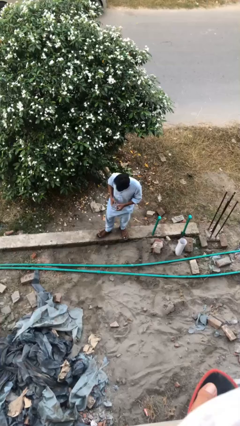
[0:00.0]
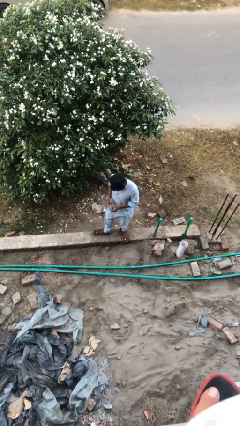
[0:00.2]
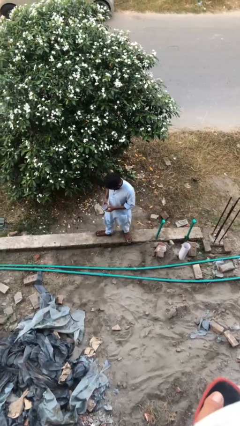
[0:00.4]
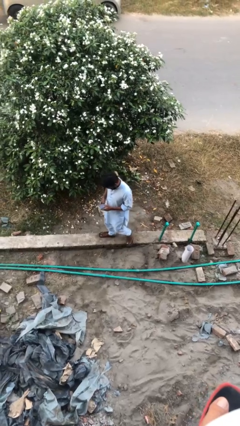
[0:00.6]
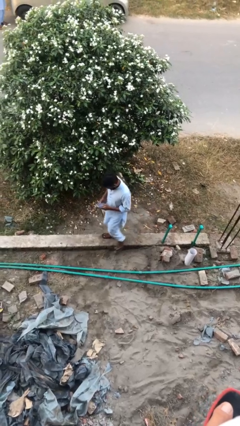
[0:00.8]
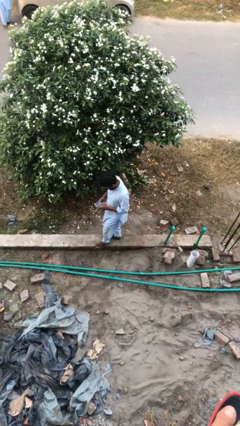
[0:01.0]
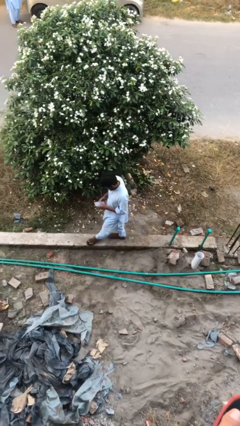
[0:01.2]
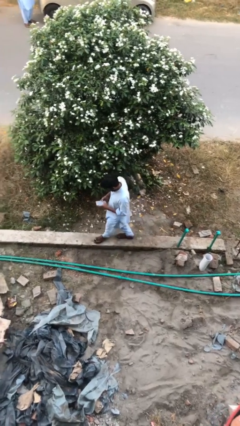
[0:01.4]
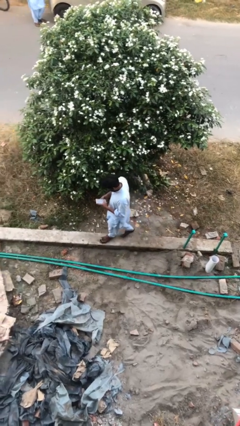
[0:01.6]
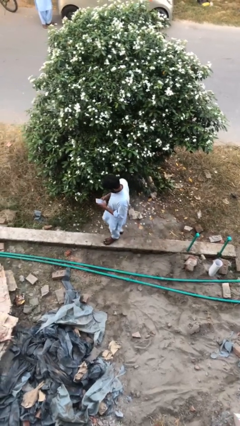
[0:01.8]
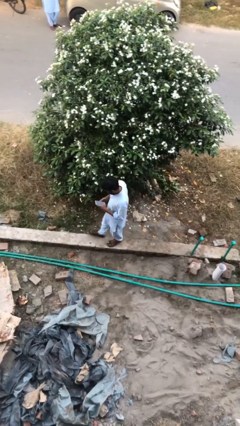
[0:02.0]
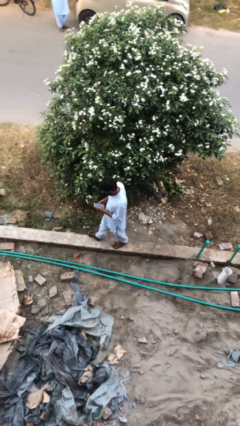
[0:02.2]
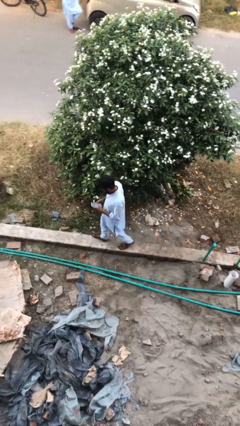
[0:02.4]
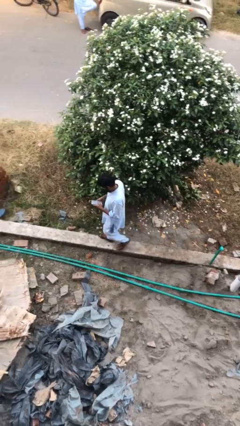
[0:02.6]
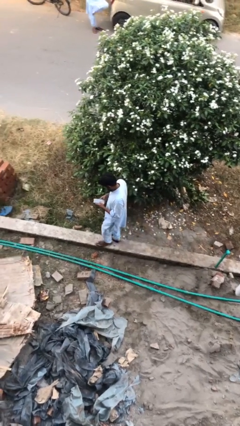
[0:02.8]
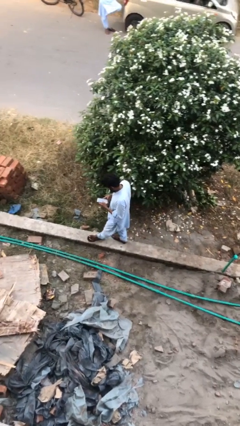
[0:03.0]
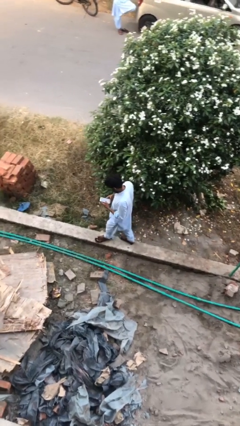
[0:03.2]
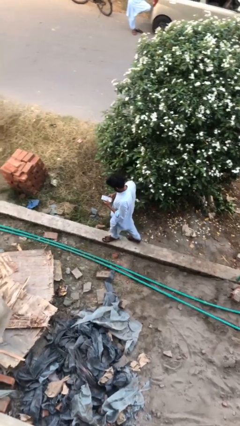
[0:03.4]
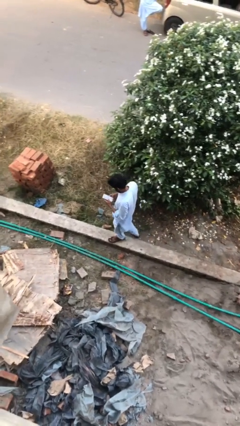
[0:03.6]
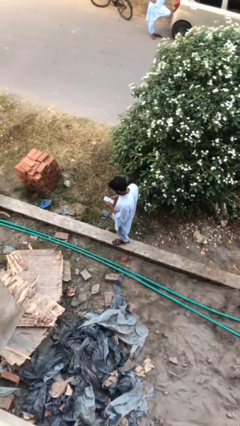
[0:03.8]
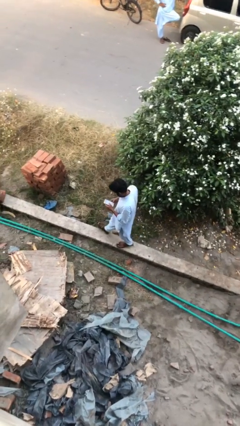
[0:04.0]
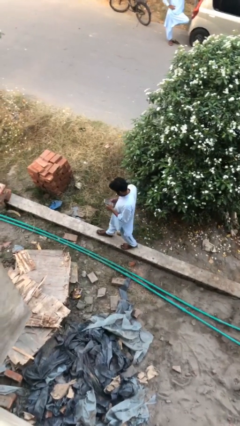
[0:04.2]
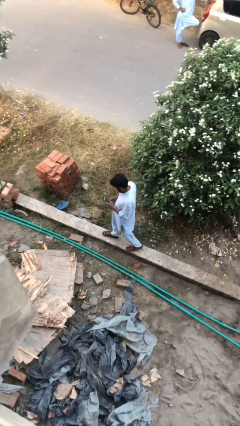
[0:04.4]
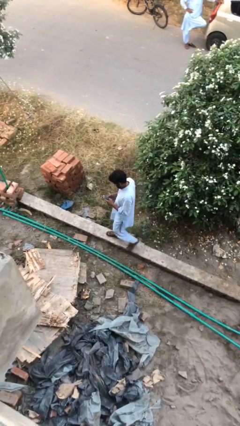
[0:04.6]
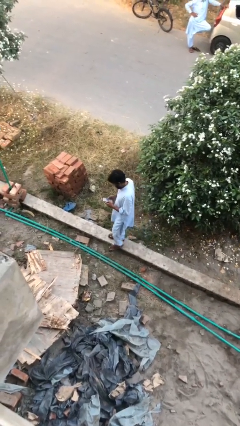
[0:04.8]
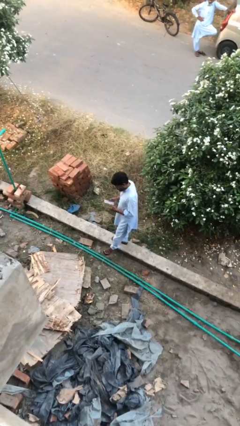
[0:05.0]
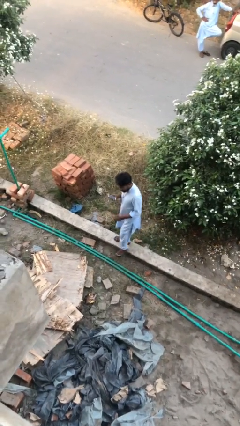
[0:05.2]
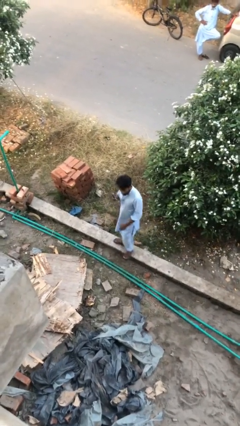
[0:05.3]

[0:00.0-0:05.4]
person texts on phone

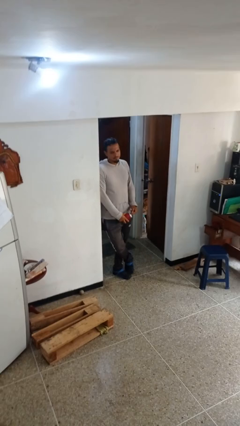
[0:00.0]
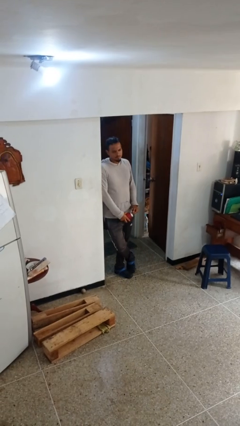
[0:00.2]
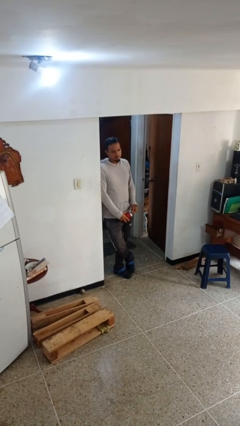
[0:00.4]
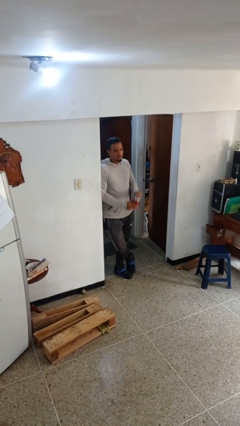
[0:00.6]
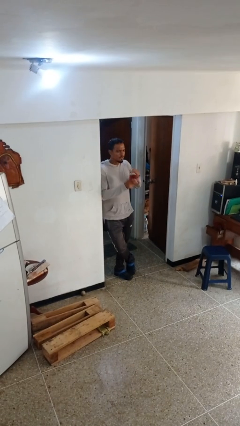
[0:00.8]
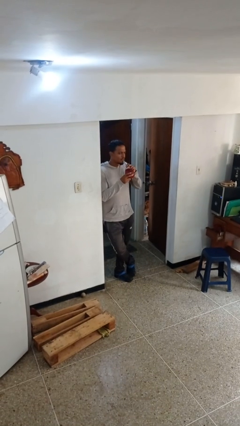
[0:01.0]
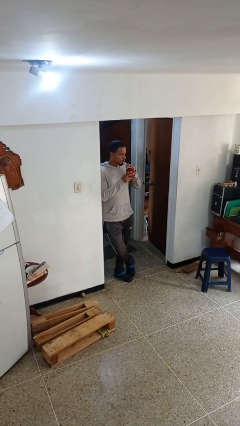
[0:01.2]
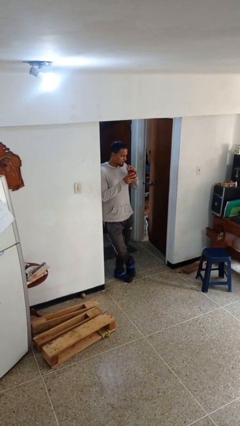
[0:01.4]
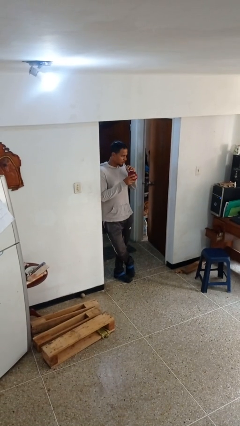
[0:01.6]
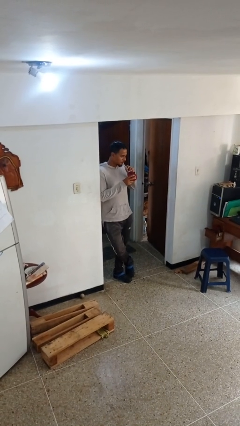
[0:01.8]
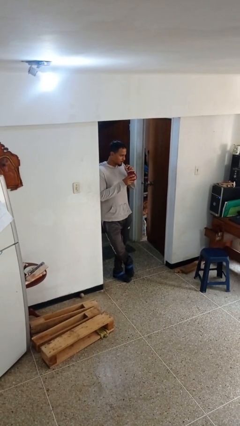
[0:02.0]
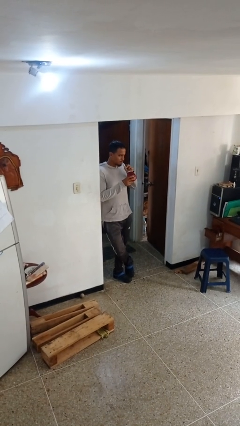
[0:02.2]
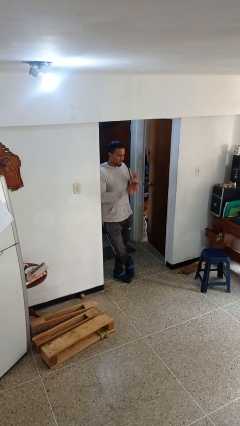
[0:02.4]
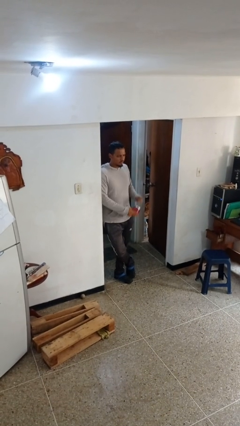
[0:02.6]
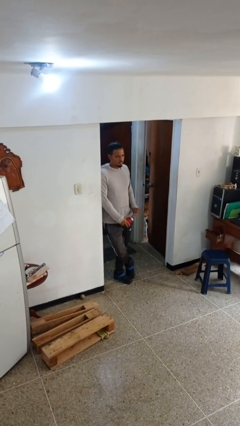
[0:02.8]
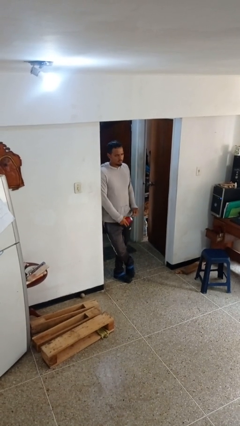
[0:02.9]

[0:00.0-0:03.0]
person drinks from straw

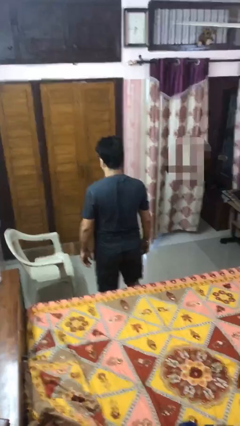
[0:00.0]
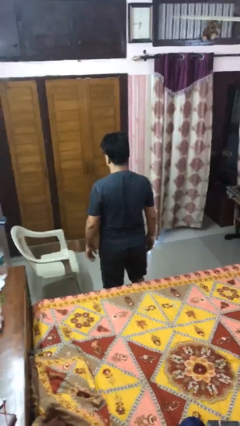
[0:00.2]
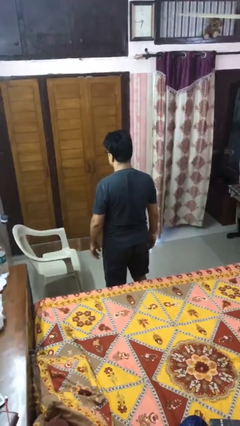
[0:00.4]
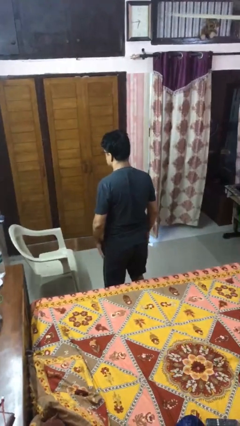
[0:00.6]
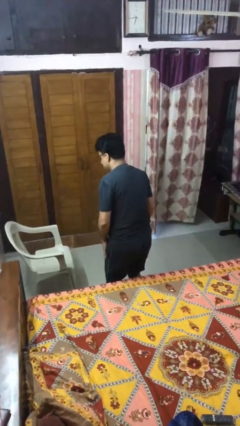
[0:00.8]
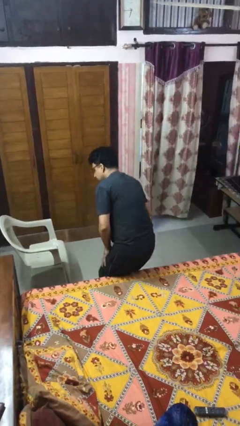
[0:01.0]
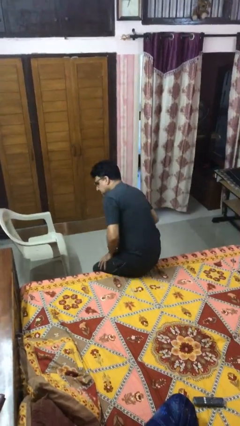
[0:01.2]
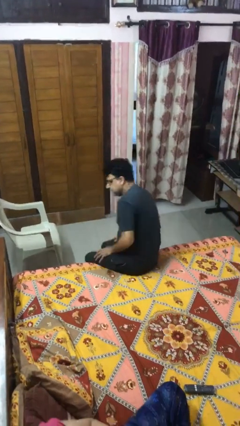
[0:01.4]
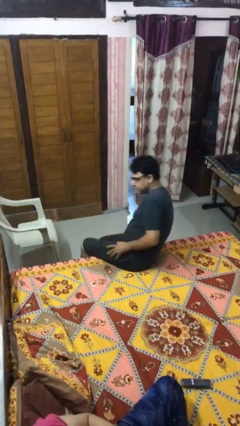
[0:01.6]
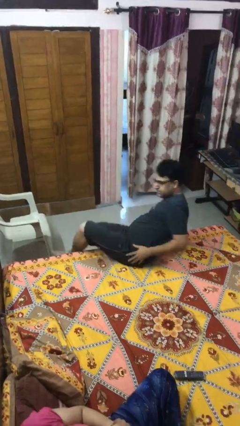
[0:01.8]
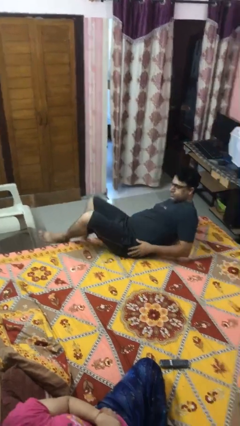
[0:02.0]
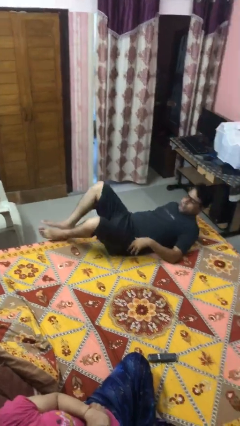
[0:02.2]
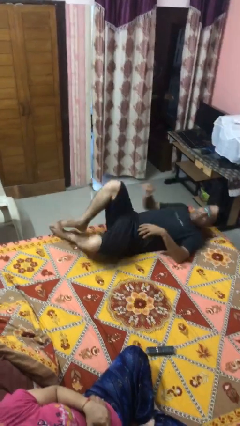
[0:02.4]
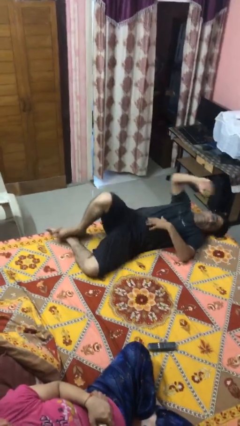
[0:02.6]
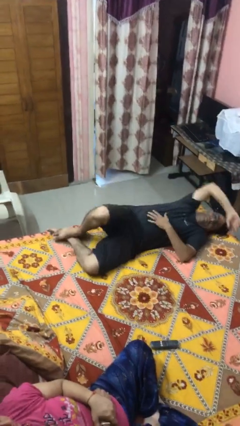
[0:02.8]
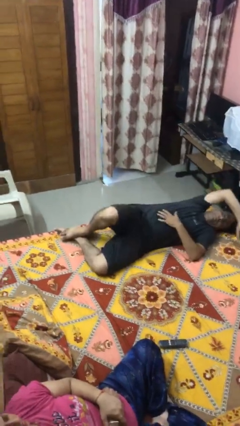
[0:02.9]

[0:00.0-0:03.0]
person lies down on bed

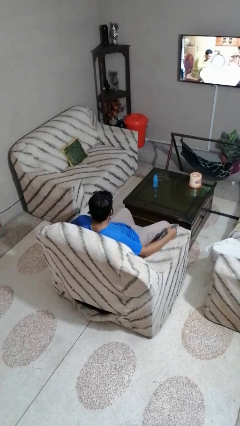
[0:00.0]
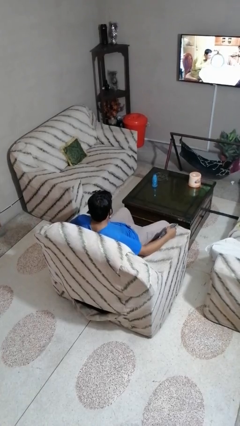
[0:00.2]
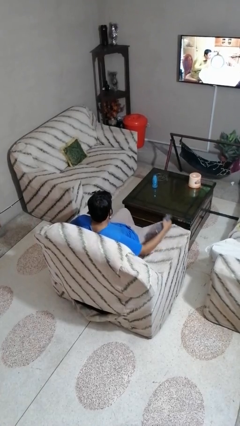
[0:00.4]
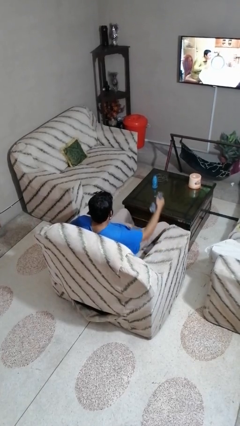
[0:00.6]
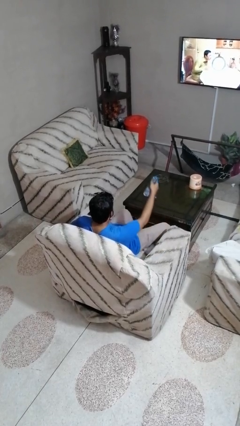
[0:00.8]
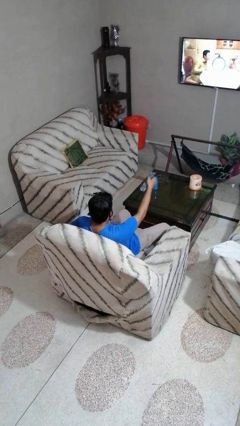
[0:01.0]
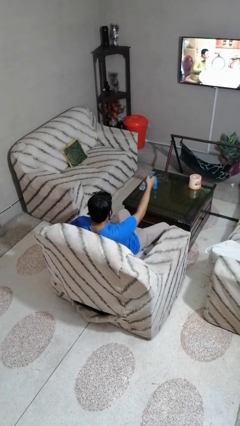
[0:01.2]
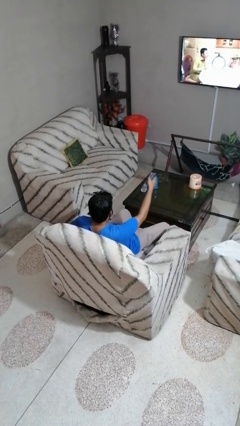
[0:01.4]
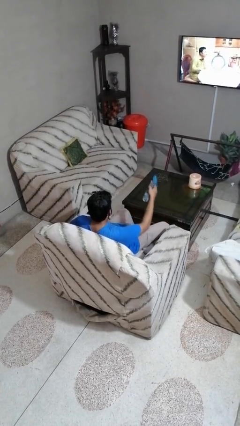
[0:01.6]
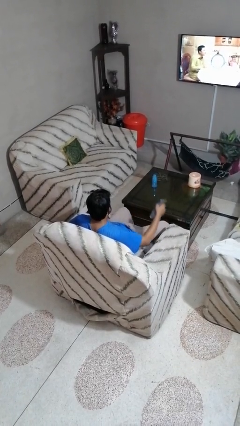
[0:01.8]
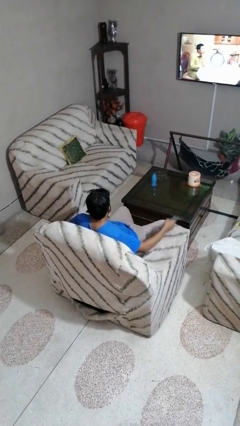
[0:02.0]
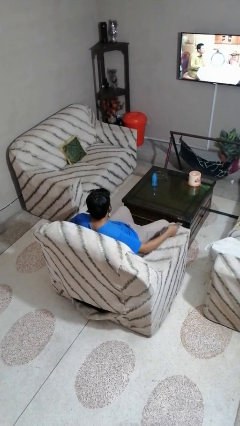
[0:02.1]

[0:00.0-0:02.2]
person uses television remote

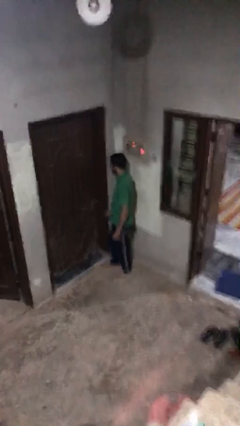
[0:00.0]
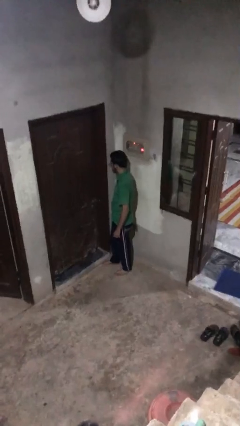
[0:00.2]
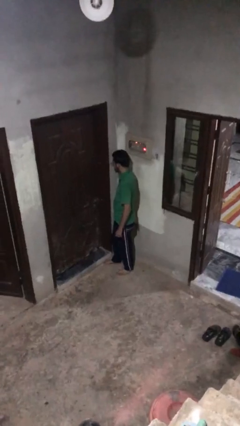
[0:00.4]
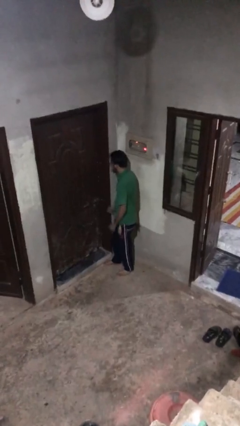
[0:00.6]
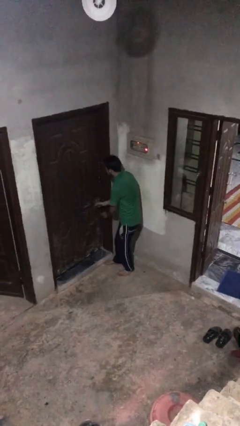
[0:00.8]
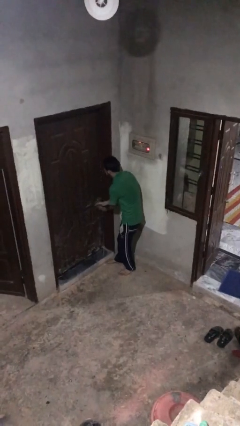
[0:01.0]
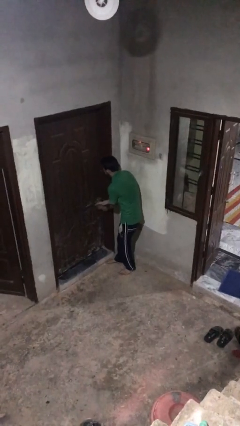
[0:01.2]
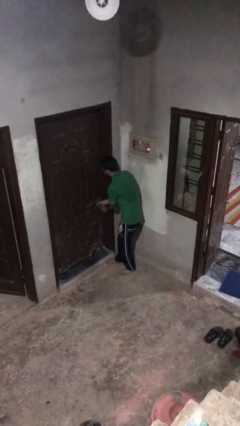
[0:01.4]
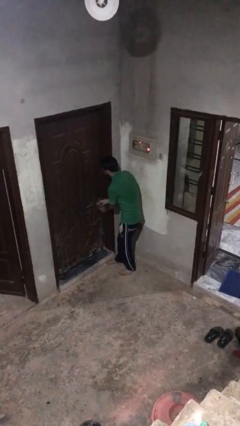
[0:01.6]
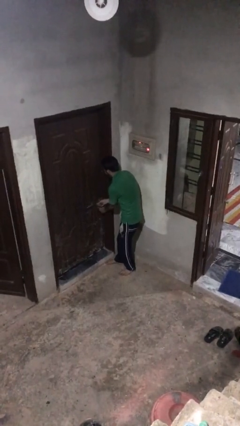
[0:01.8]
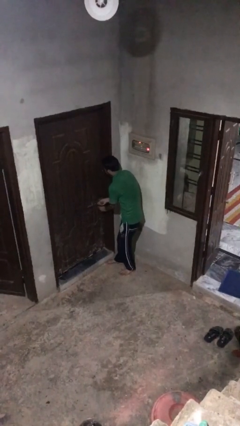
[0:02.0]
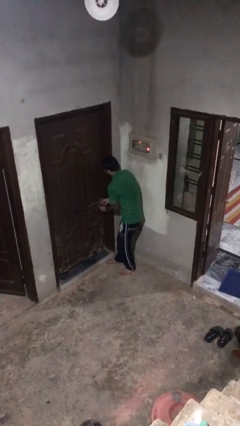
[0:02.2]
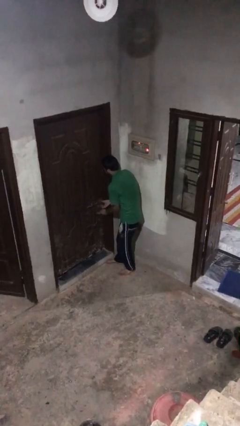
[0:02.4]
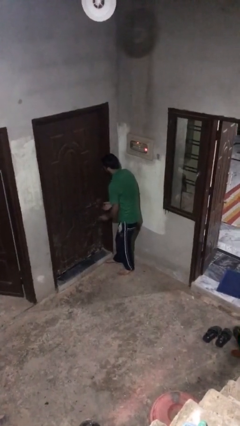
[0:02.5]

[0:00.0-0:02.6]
person locks door with keys

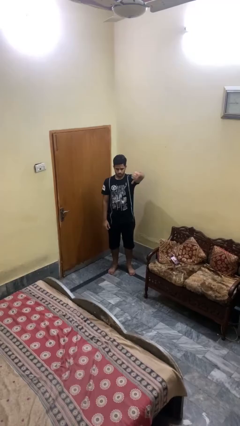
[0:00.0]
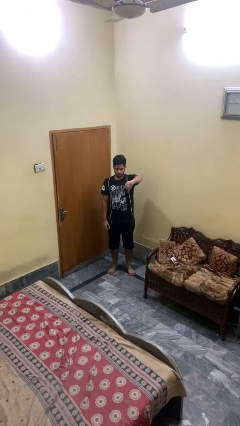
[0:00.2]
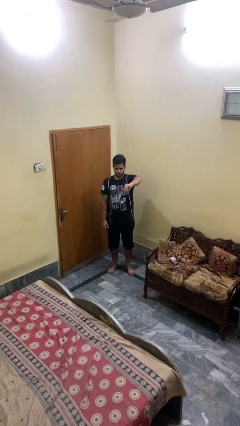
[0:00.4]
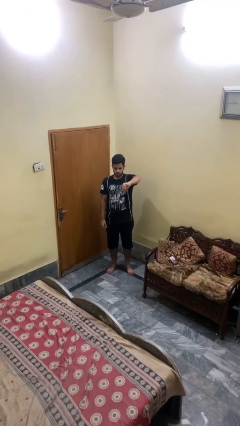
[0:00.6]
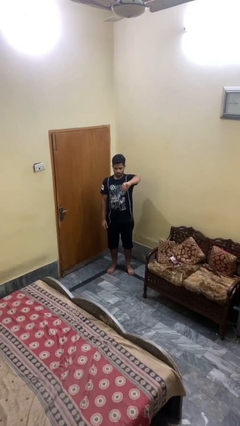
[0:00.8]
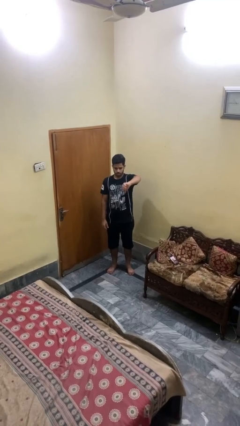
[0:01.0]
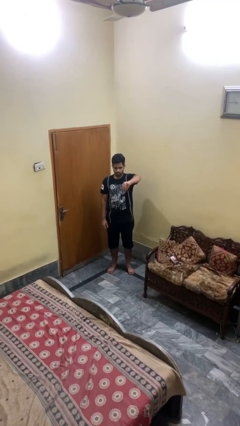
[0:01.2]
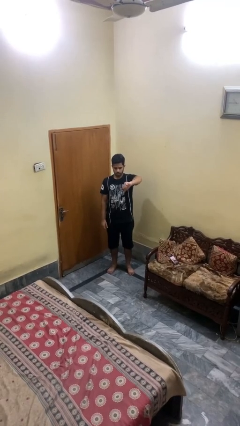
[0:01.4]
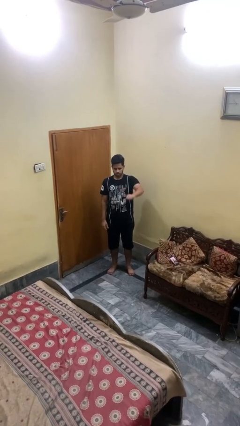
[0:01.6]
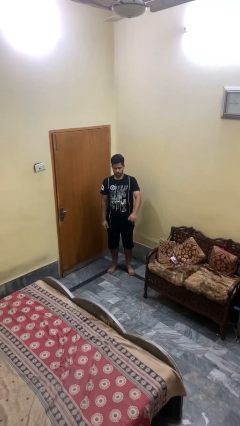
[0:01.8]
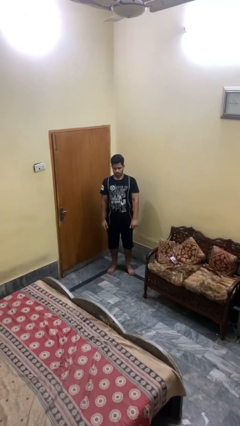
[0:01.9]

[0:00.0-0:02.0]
person gestures thumbs down
